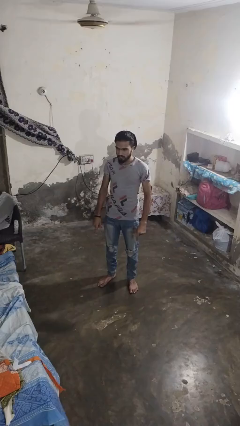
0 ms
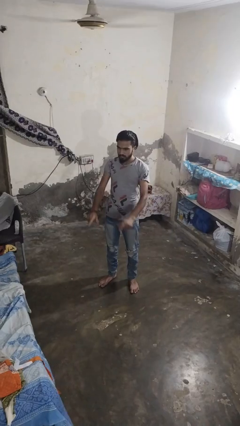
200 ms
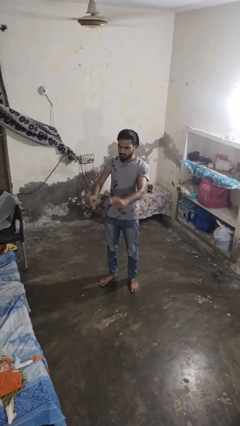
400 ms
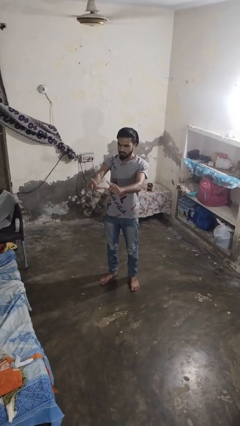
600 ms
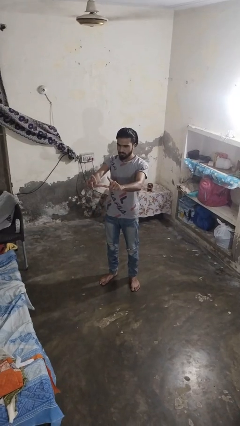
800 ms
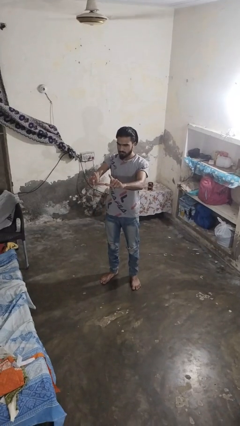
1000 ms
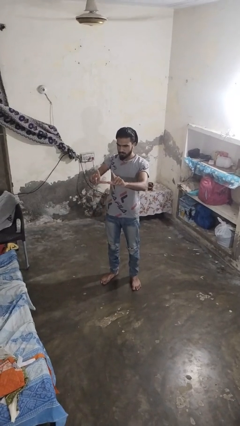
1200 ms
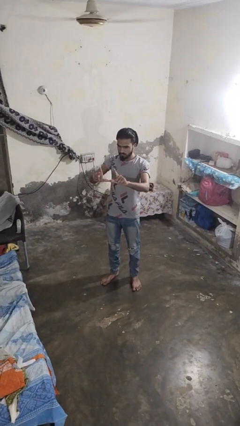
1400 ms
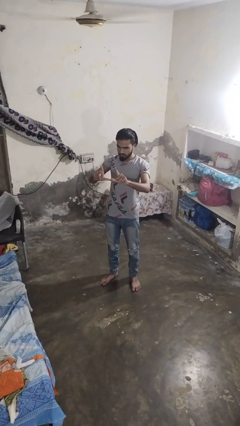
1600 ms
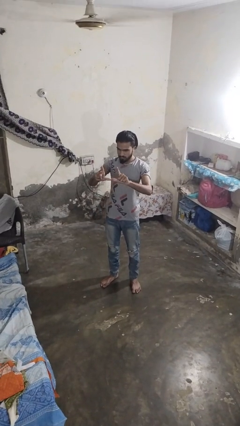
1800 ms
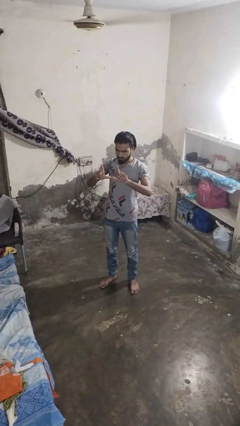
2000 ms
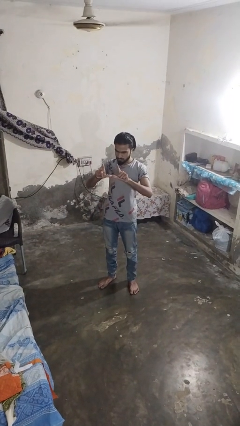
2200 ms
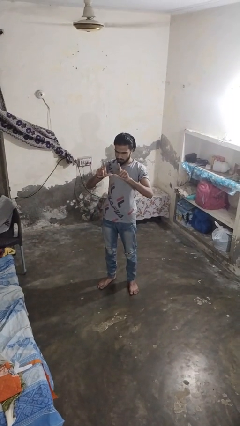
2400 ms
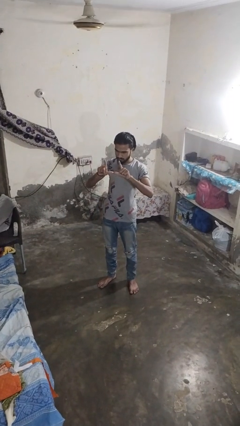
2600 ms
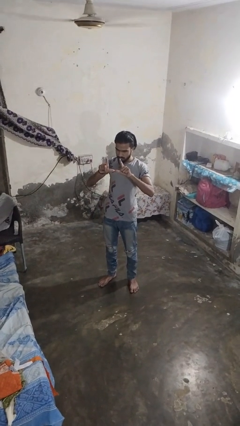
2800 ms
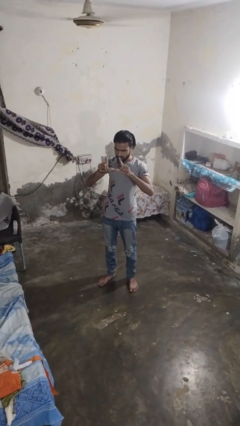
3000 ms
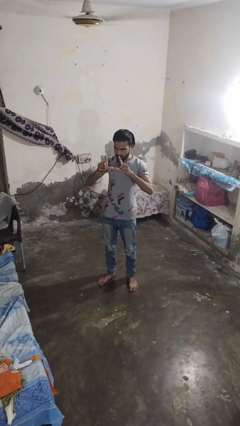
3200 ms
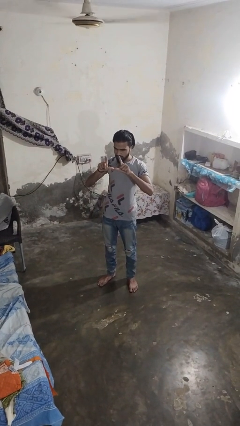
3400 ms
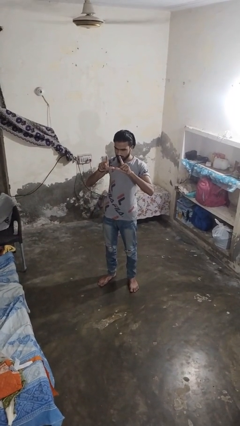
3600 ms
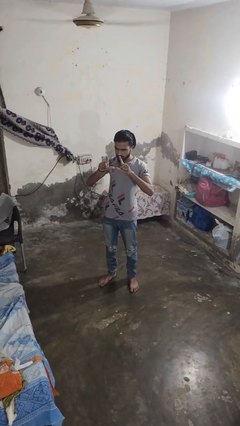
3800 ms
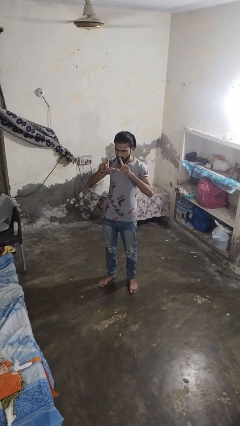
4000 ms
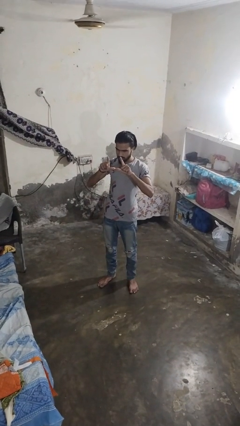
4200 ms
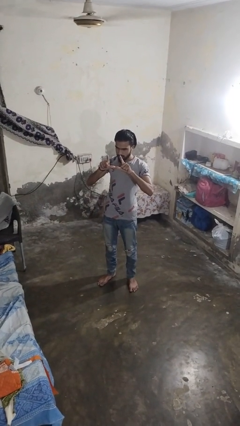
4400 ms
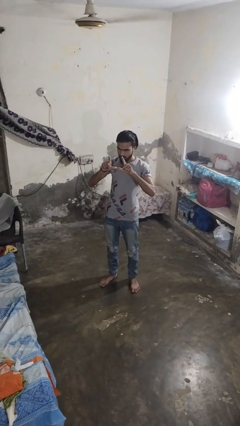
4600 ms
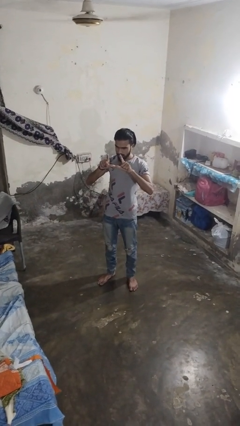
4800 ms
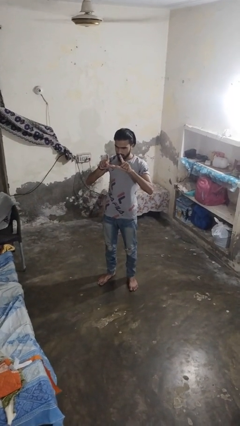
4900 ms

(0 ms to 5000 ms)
person gestures zoom in

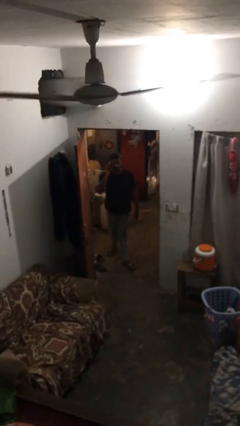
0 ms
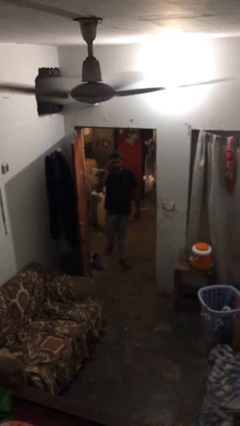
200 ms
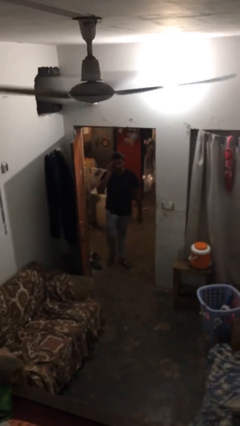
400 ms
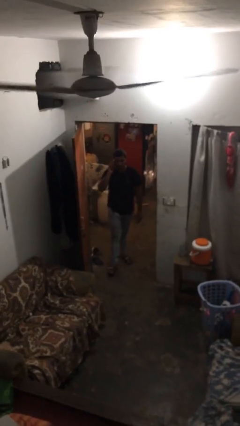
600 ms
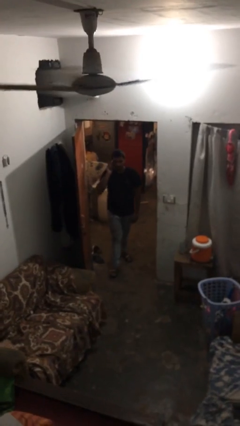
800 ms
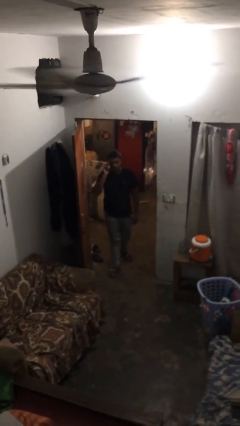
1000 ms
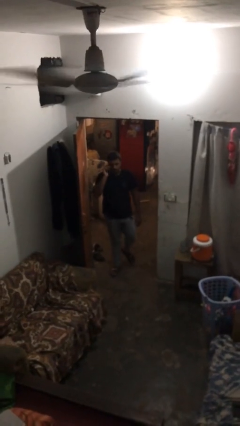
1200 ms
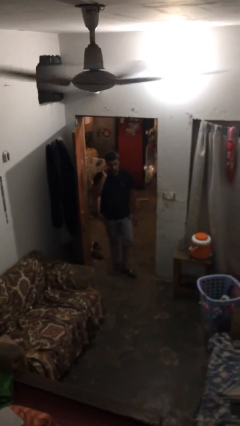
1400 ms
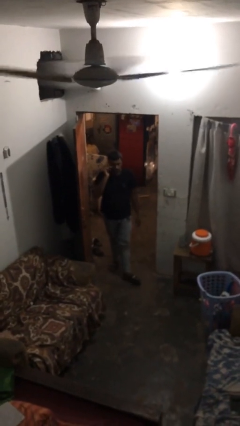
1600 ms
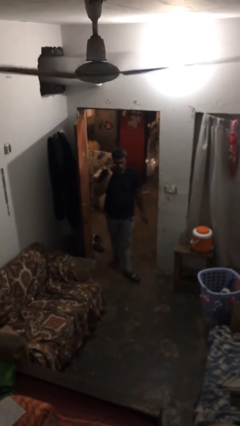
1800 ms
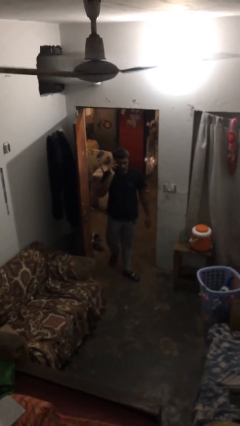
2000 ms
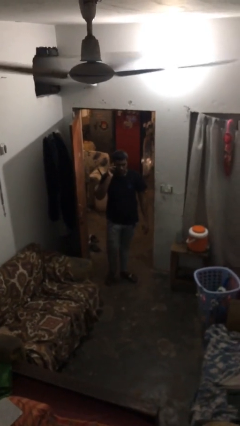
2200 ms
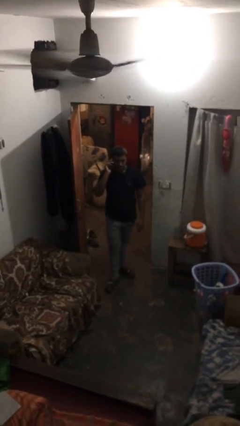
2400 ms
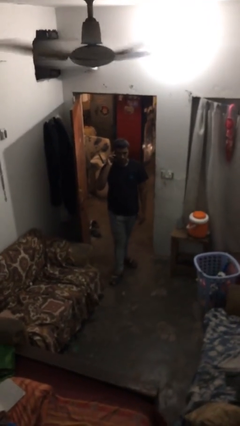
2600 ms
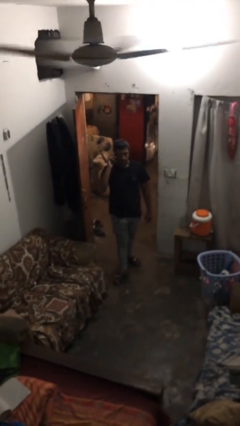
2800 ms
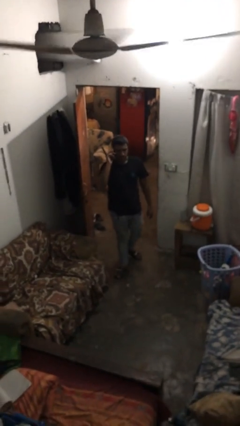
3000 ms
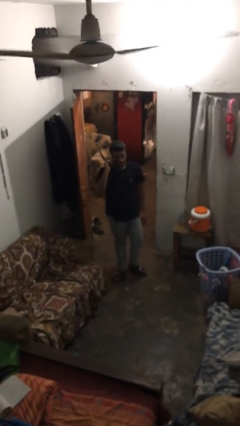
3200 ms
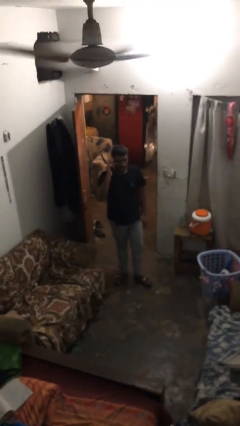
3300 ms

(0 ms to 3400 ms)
person enters scene through structure

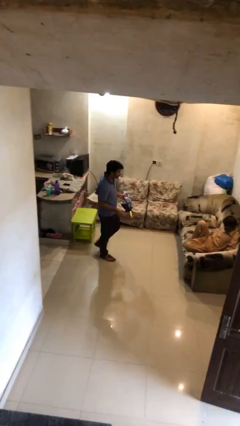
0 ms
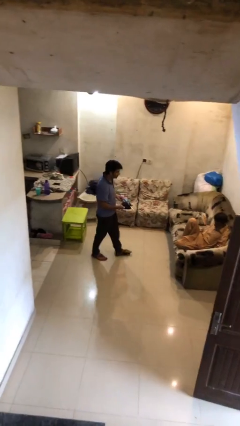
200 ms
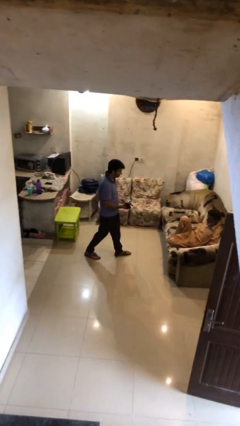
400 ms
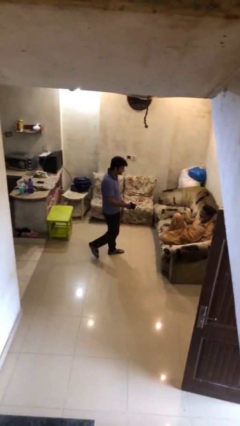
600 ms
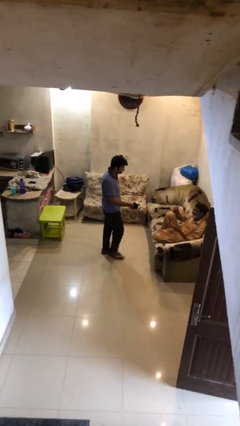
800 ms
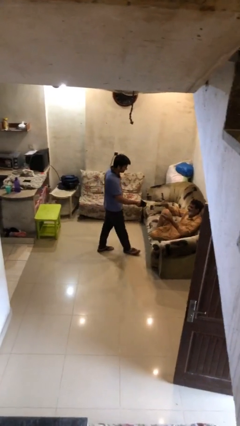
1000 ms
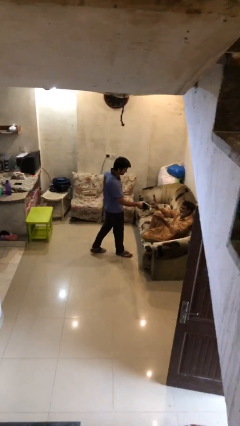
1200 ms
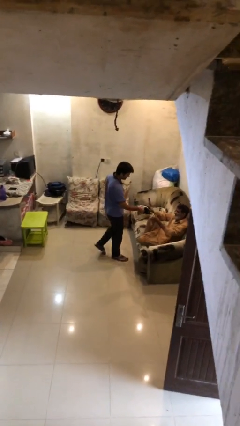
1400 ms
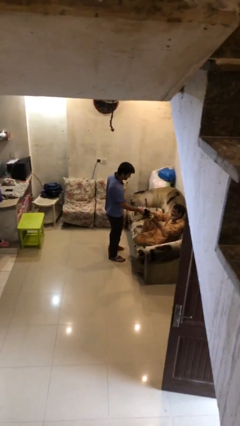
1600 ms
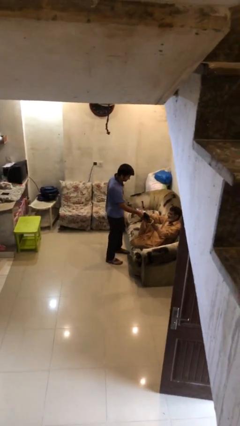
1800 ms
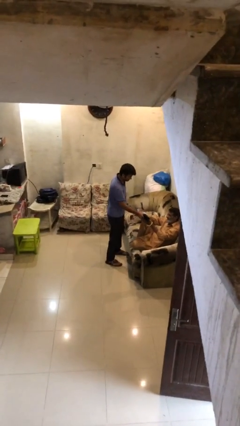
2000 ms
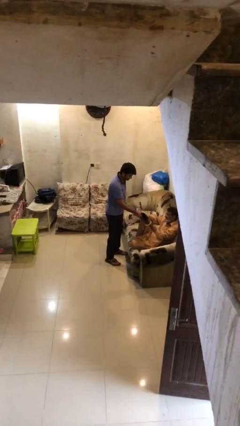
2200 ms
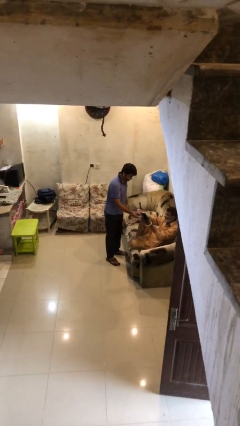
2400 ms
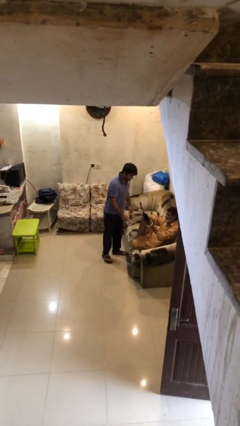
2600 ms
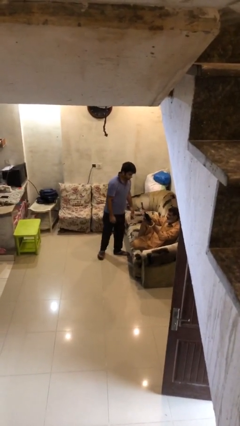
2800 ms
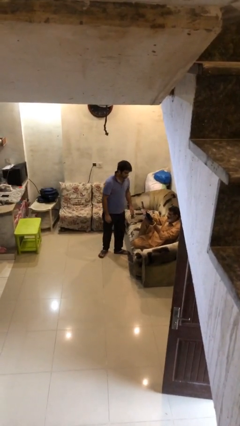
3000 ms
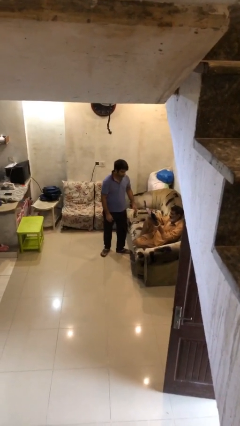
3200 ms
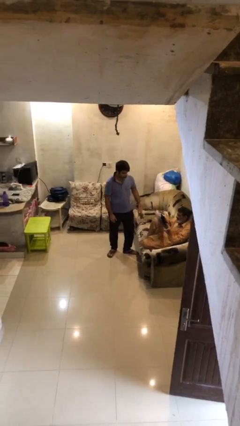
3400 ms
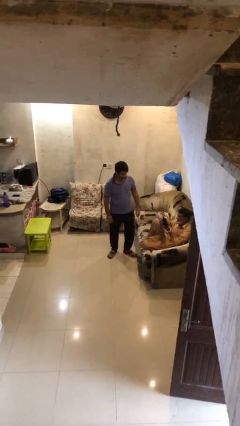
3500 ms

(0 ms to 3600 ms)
person transfers object to person

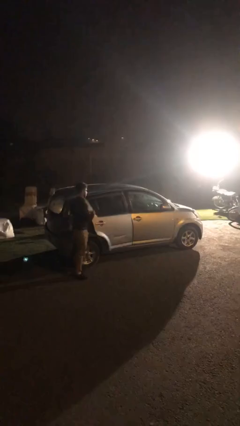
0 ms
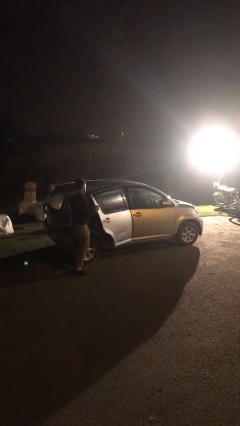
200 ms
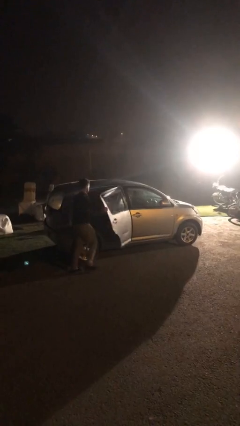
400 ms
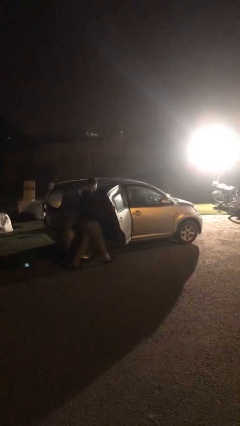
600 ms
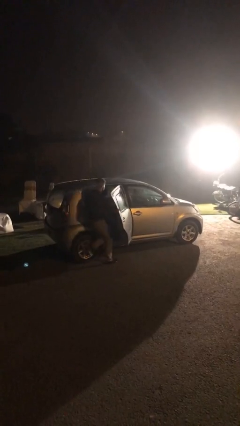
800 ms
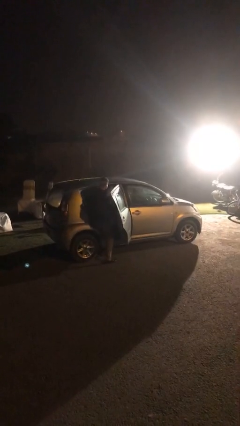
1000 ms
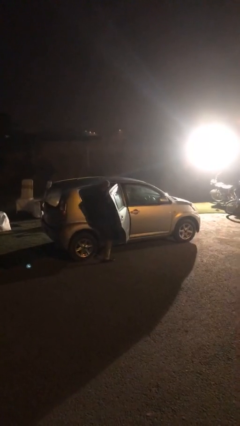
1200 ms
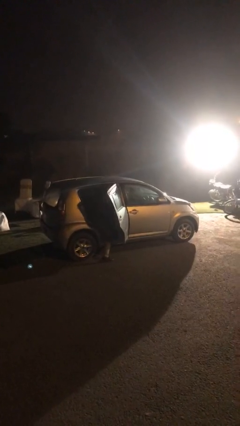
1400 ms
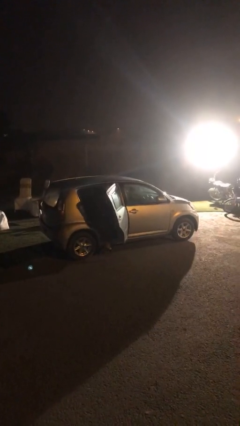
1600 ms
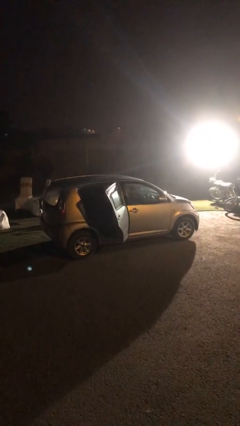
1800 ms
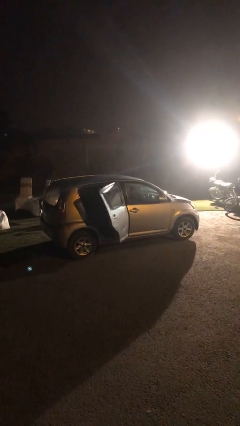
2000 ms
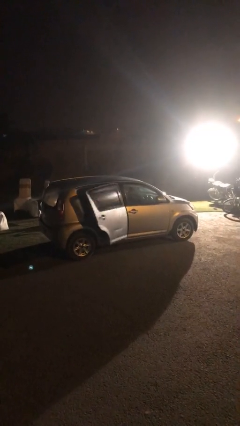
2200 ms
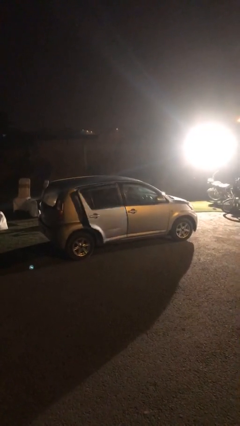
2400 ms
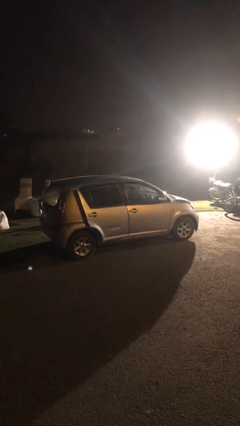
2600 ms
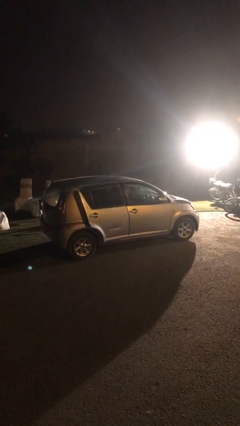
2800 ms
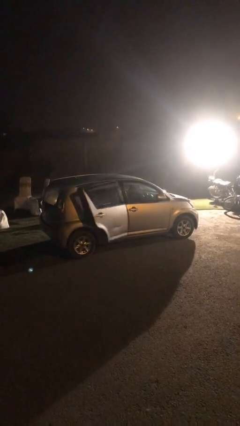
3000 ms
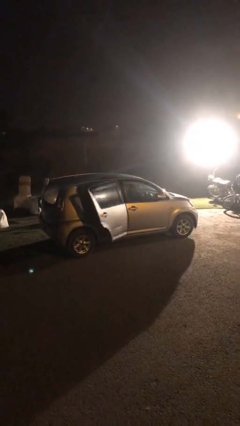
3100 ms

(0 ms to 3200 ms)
car picks up person

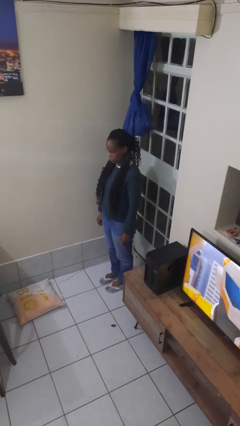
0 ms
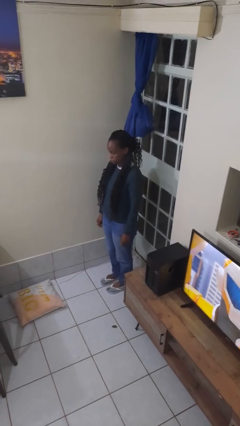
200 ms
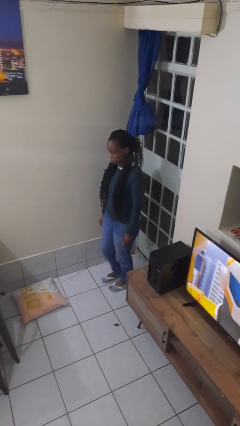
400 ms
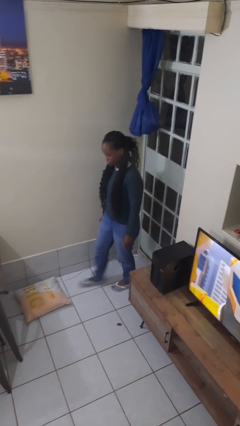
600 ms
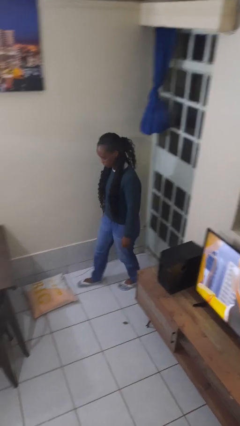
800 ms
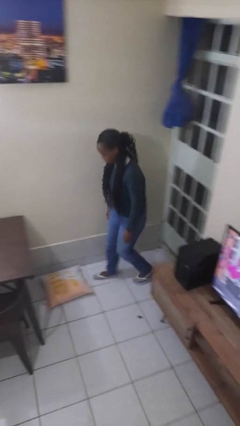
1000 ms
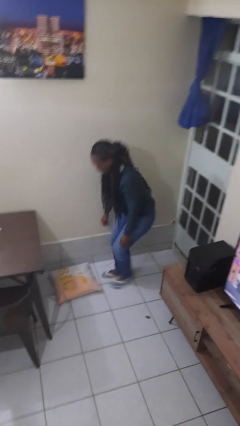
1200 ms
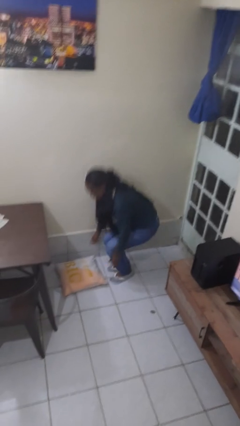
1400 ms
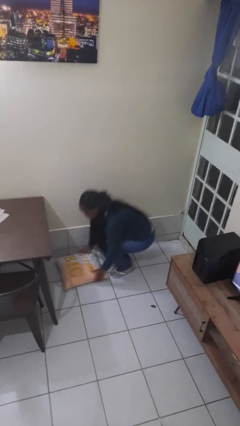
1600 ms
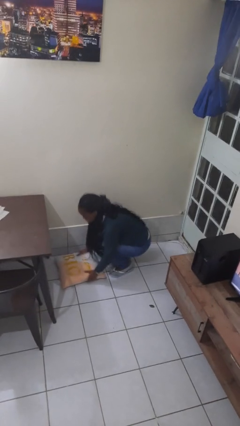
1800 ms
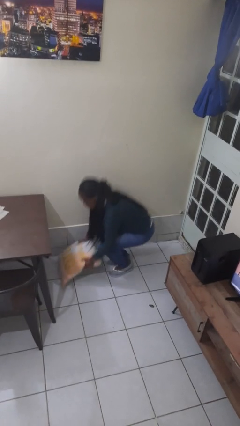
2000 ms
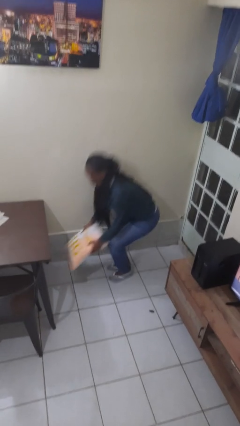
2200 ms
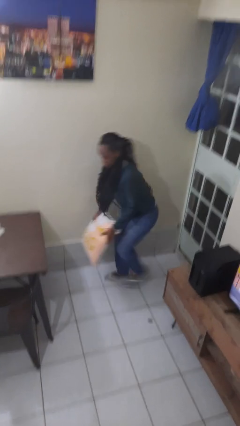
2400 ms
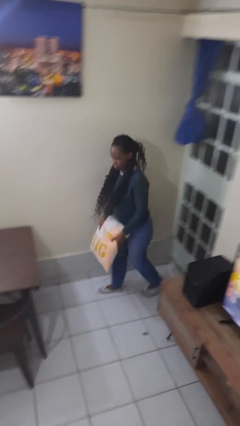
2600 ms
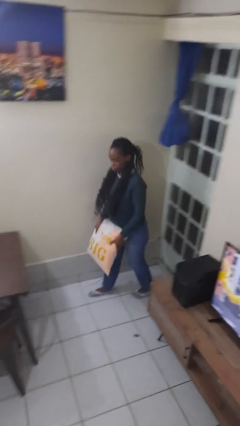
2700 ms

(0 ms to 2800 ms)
person picks up object from floor
